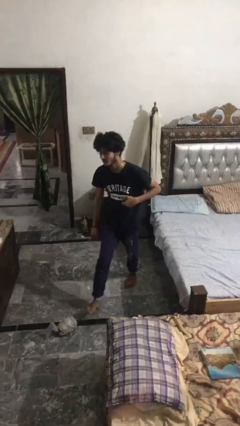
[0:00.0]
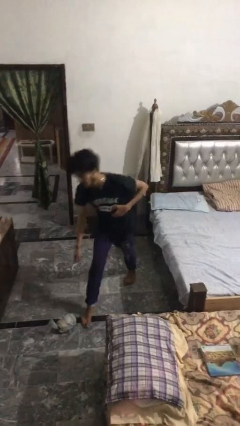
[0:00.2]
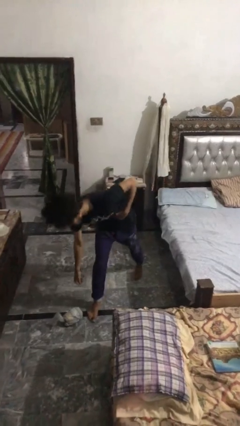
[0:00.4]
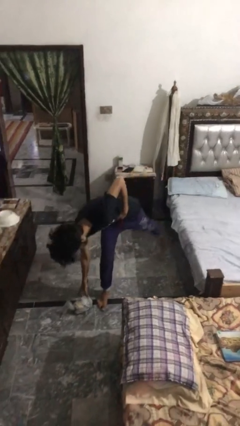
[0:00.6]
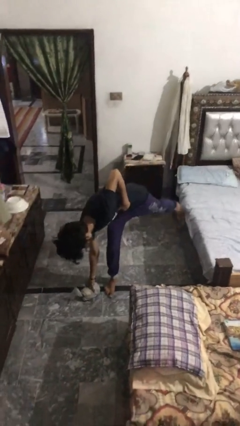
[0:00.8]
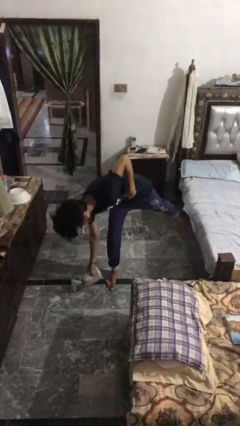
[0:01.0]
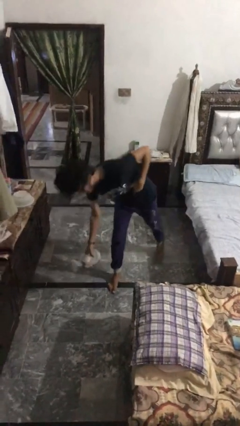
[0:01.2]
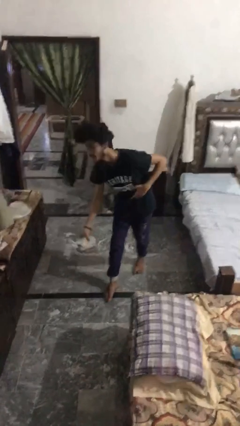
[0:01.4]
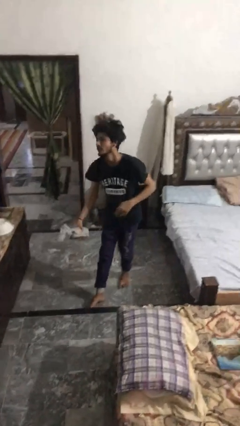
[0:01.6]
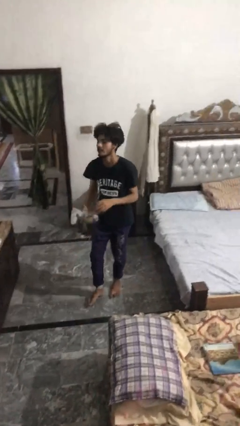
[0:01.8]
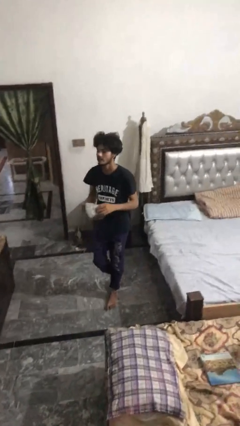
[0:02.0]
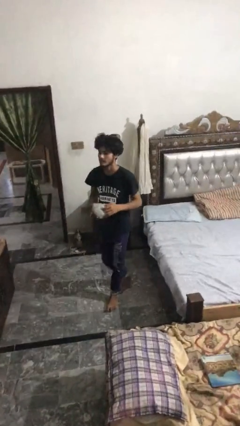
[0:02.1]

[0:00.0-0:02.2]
person picks up object from floor

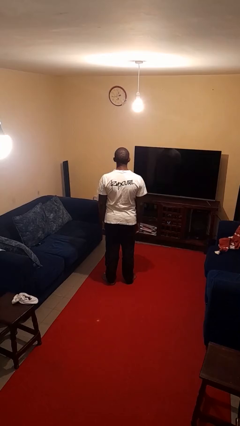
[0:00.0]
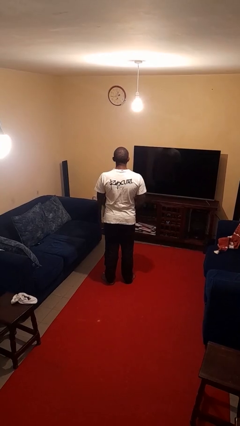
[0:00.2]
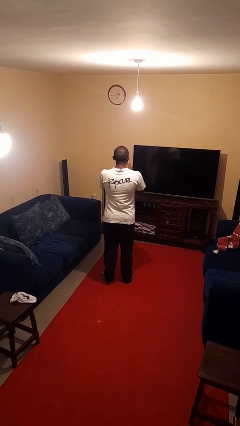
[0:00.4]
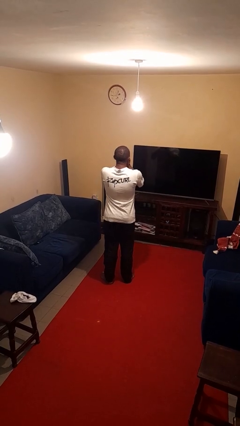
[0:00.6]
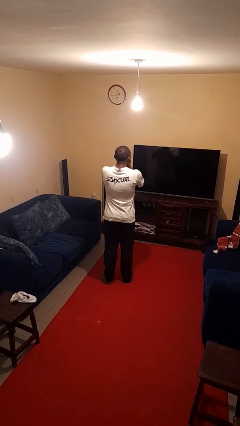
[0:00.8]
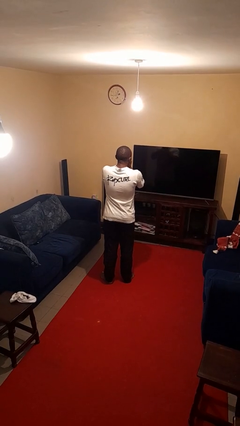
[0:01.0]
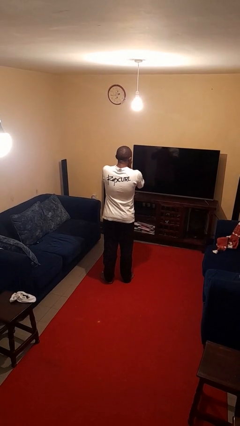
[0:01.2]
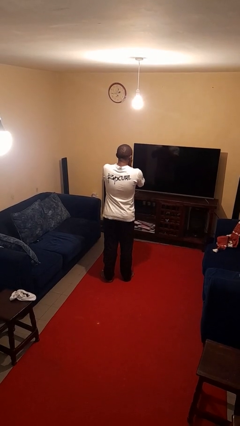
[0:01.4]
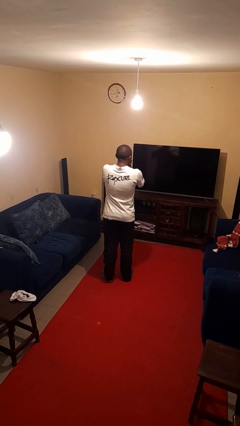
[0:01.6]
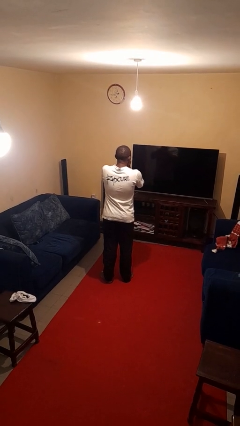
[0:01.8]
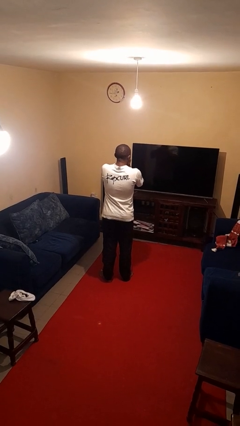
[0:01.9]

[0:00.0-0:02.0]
person sneezes into hand

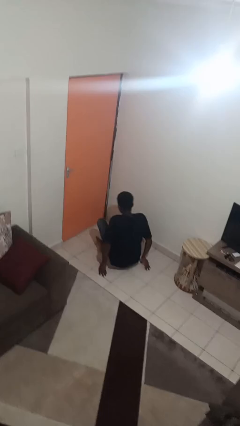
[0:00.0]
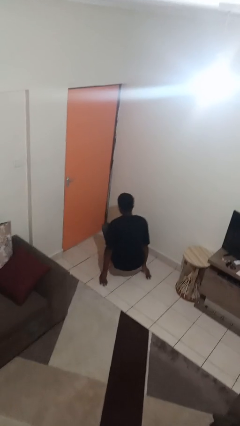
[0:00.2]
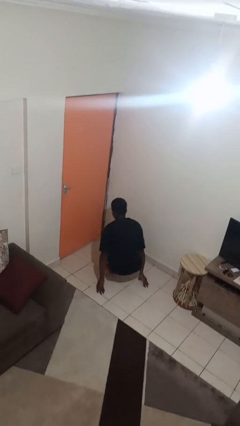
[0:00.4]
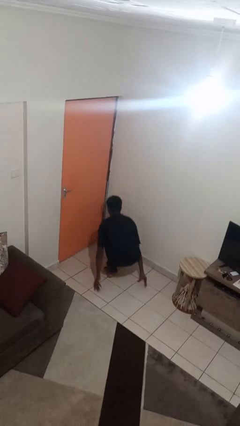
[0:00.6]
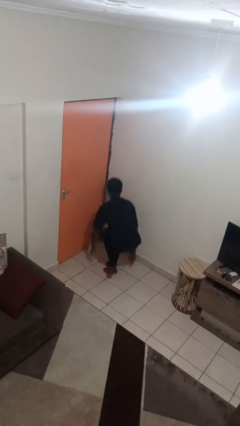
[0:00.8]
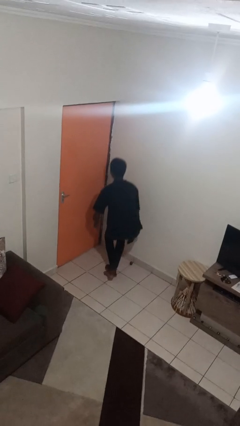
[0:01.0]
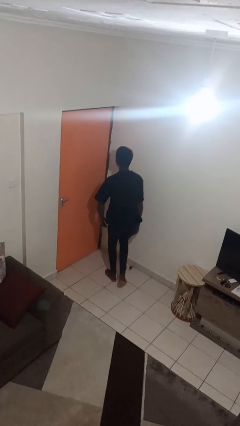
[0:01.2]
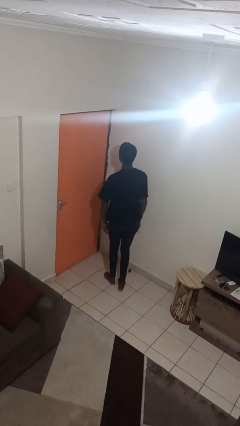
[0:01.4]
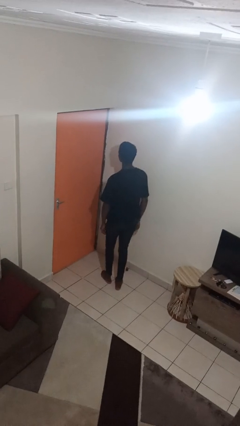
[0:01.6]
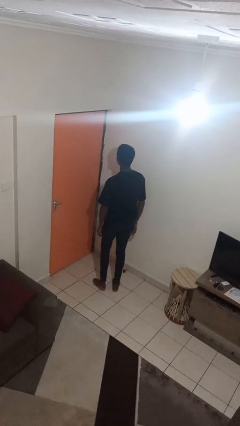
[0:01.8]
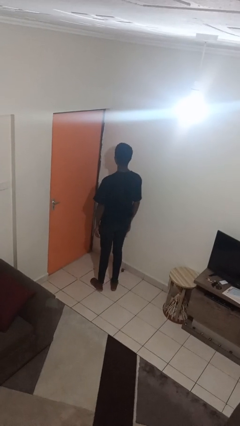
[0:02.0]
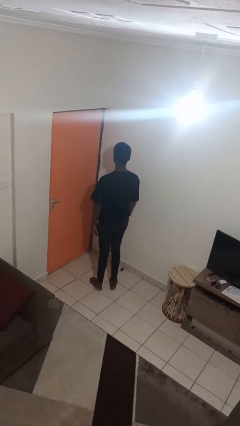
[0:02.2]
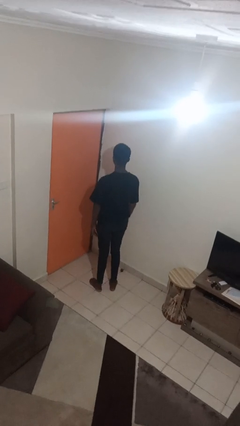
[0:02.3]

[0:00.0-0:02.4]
person stands up from floor

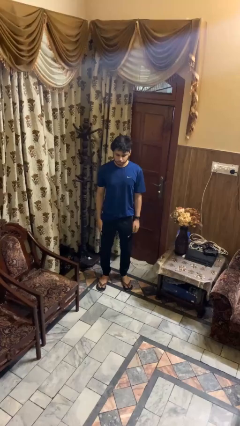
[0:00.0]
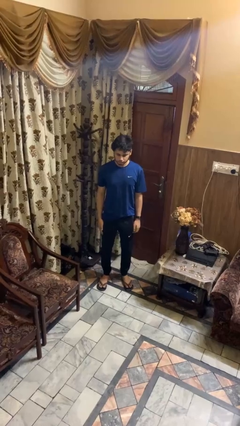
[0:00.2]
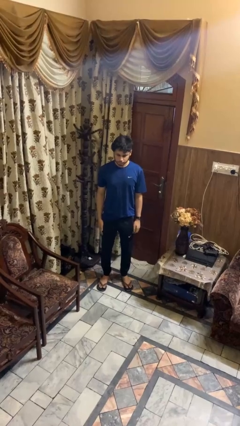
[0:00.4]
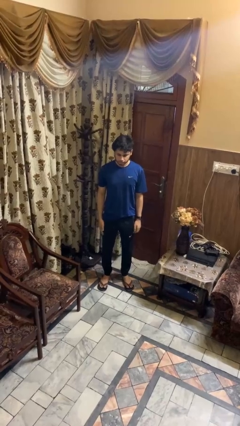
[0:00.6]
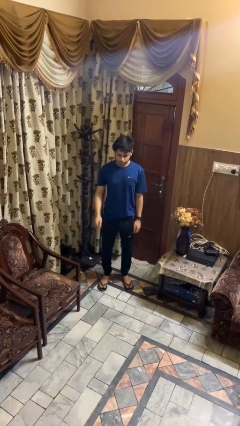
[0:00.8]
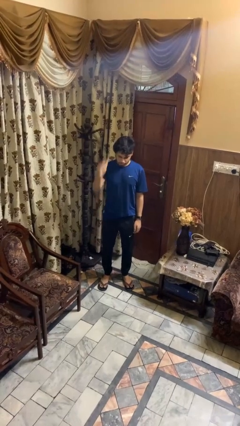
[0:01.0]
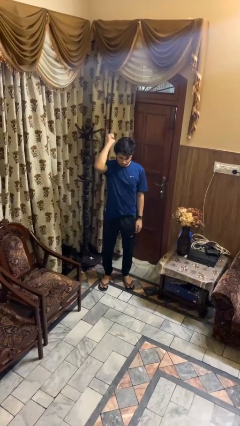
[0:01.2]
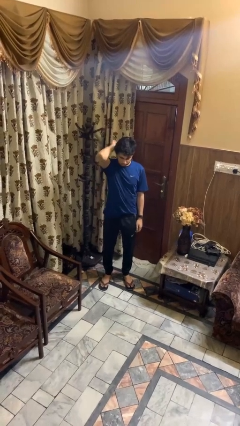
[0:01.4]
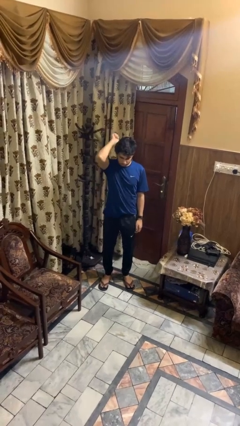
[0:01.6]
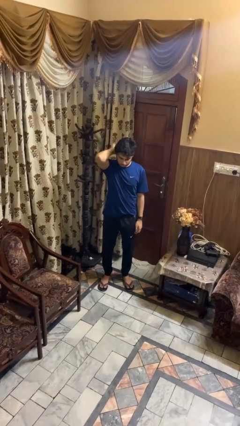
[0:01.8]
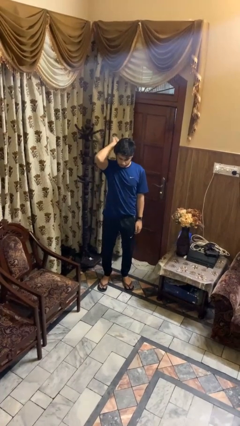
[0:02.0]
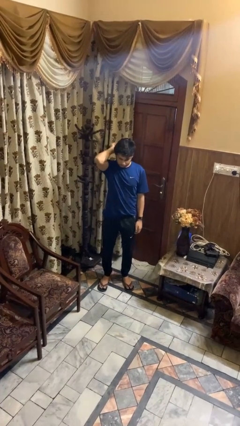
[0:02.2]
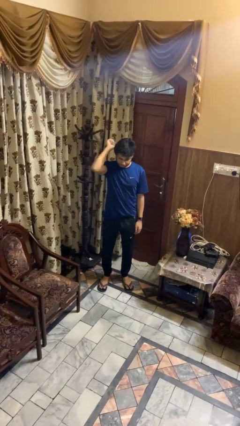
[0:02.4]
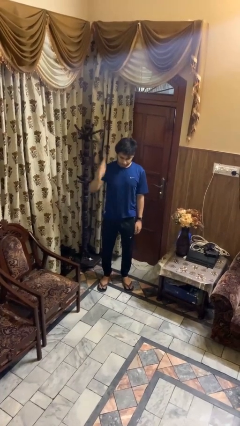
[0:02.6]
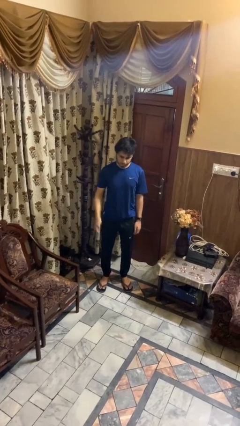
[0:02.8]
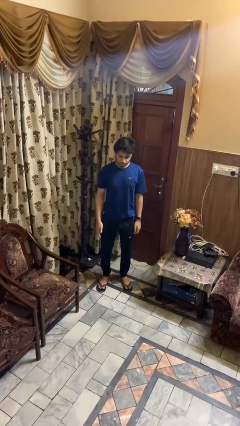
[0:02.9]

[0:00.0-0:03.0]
person gestures behind me

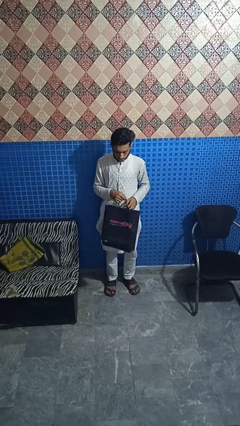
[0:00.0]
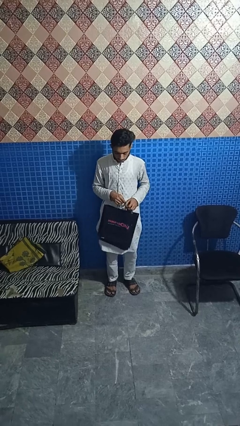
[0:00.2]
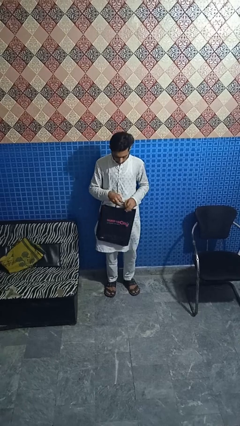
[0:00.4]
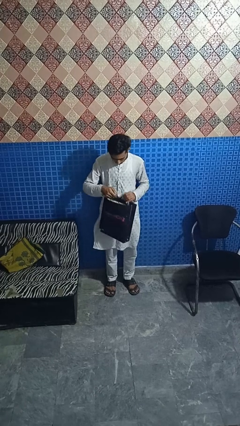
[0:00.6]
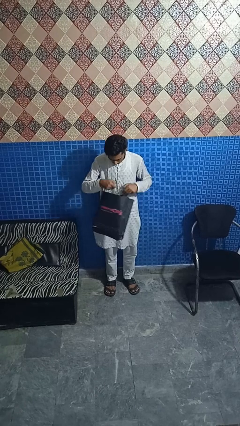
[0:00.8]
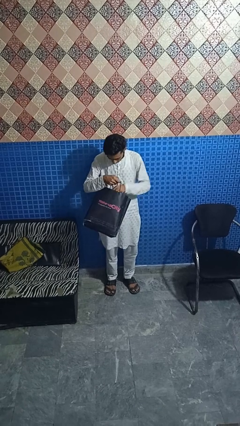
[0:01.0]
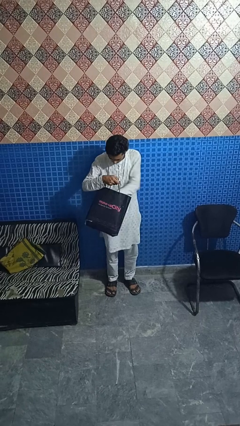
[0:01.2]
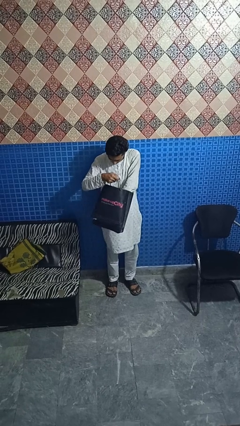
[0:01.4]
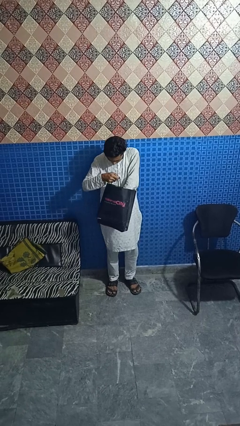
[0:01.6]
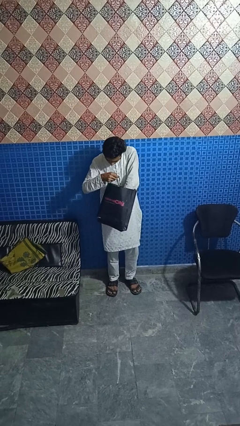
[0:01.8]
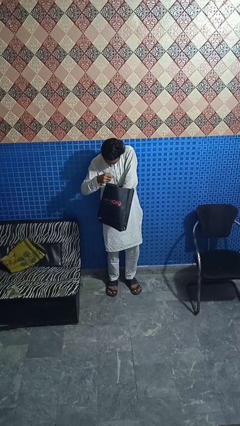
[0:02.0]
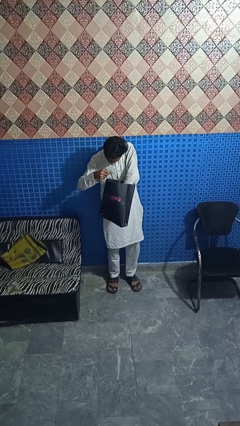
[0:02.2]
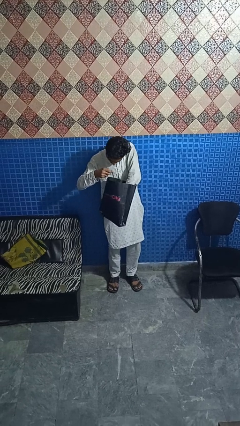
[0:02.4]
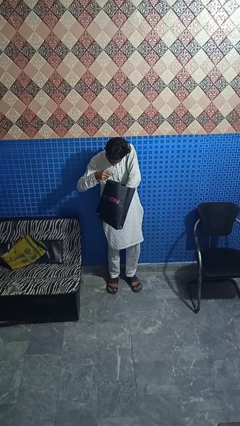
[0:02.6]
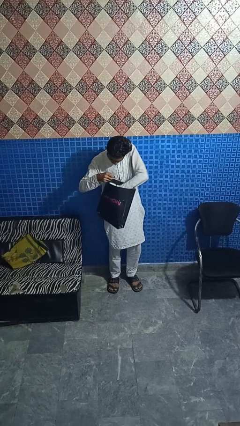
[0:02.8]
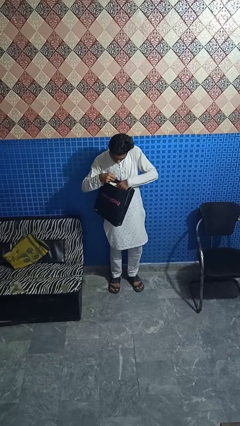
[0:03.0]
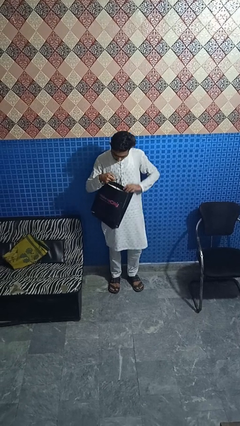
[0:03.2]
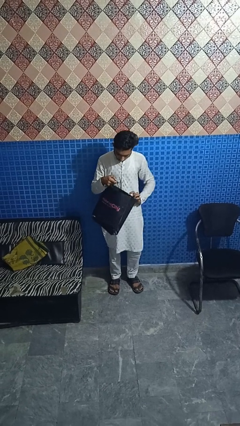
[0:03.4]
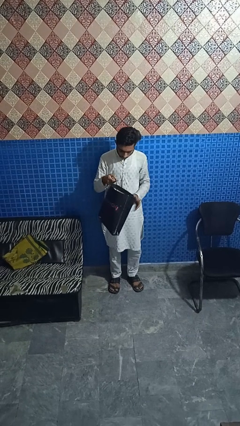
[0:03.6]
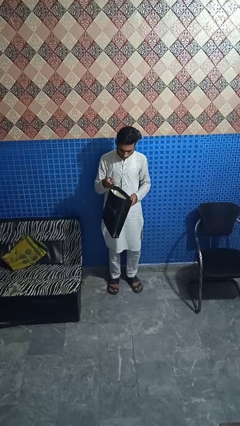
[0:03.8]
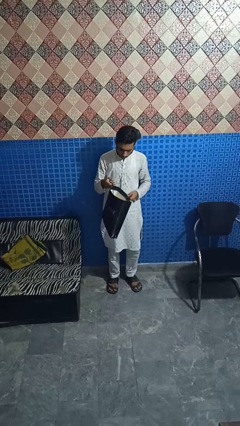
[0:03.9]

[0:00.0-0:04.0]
person searches in bag

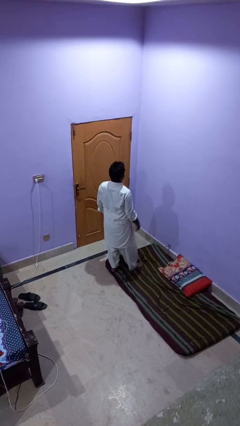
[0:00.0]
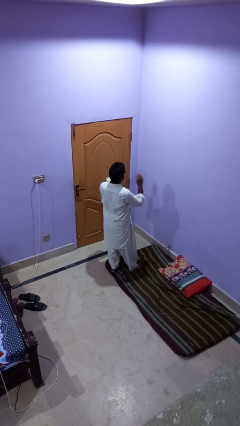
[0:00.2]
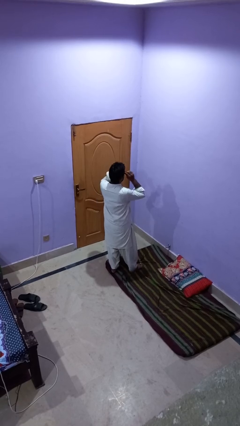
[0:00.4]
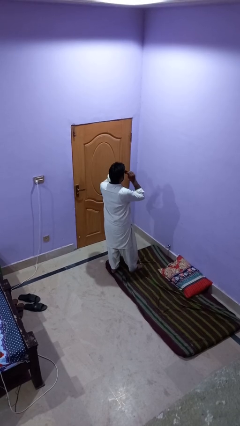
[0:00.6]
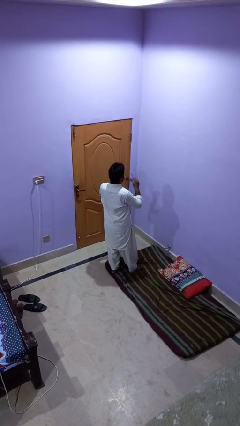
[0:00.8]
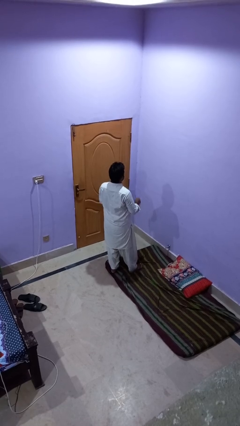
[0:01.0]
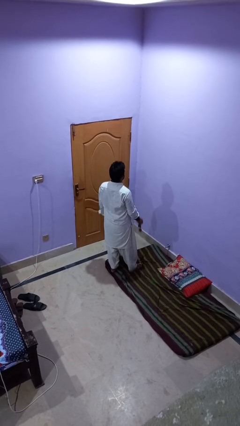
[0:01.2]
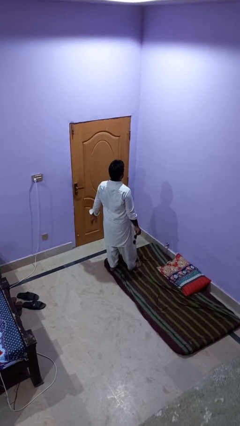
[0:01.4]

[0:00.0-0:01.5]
person takes off sunglasses

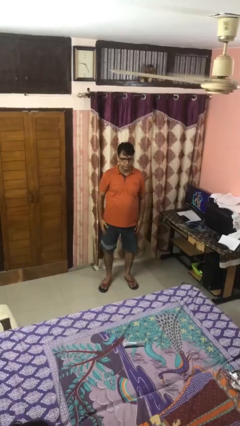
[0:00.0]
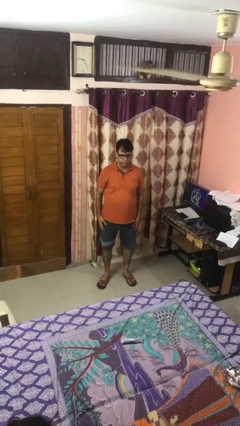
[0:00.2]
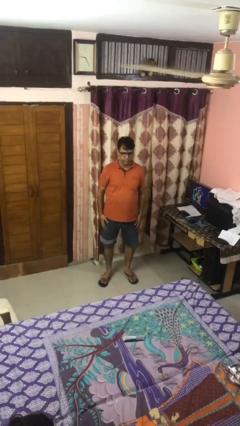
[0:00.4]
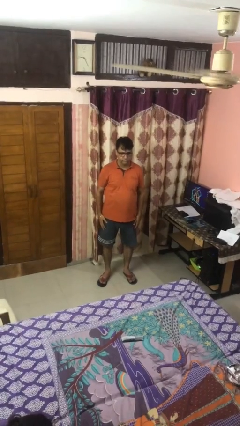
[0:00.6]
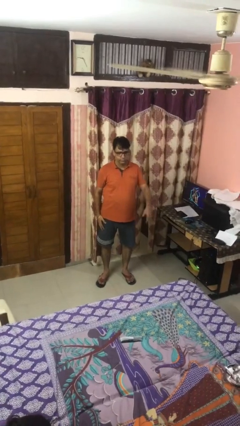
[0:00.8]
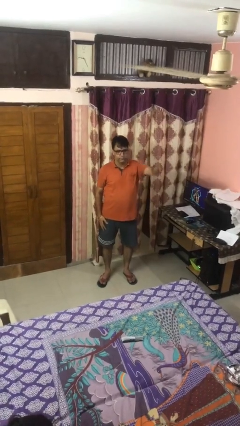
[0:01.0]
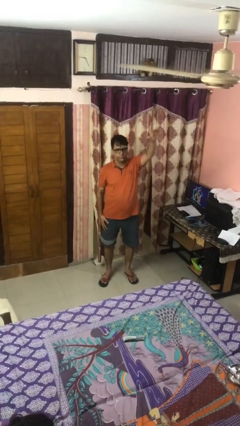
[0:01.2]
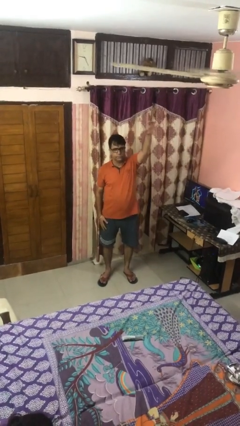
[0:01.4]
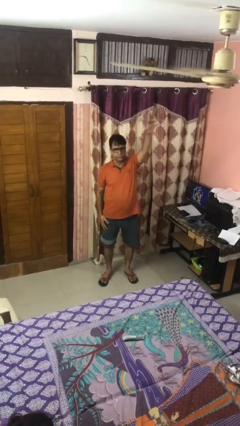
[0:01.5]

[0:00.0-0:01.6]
person gestures raise hand
